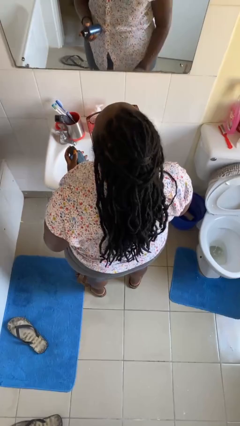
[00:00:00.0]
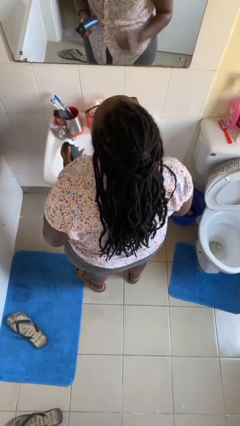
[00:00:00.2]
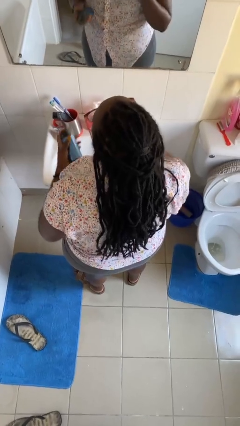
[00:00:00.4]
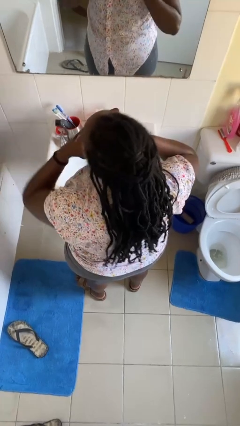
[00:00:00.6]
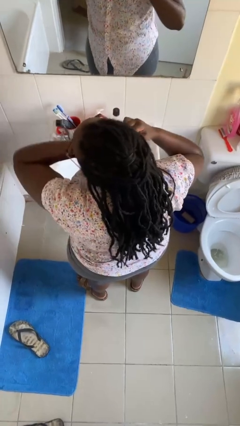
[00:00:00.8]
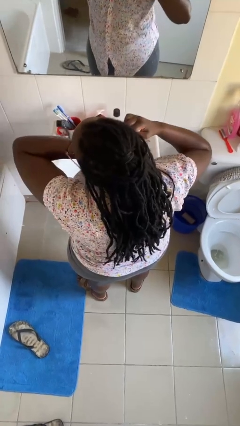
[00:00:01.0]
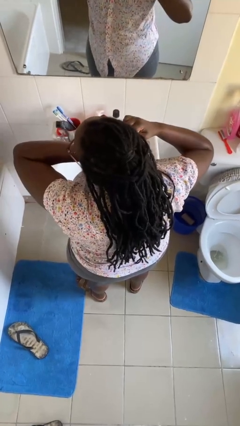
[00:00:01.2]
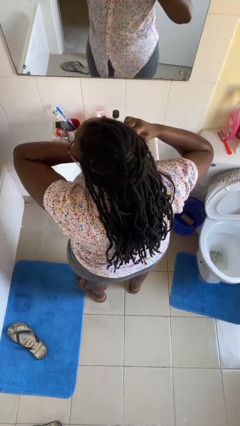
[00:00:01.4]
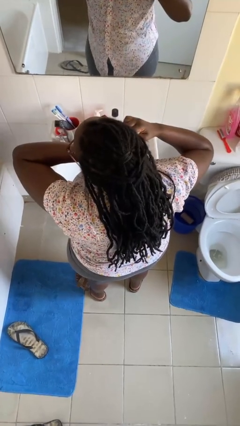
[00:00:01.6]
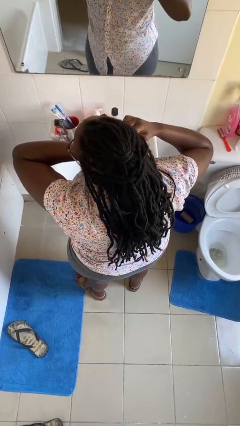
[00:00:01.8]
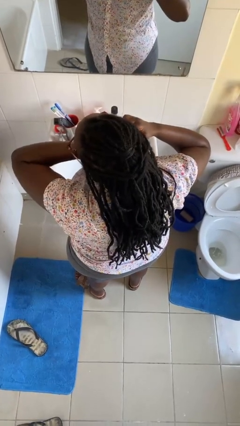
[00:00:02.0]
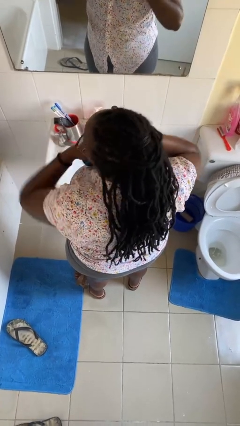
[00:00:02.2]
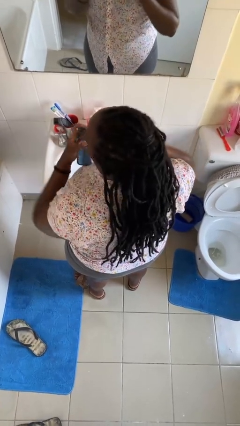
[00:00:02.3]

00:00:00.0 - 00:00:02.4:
person applies deodorant

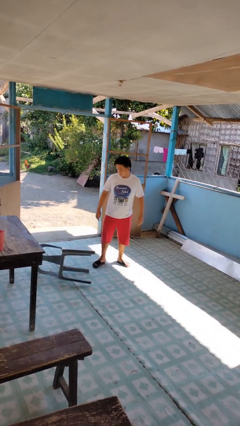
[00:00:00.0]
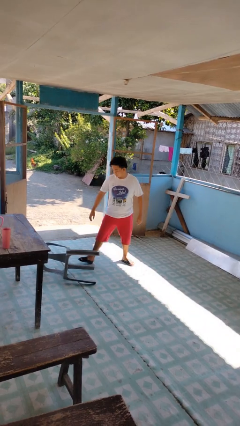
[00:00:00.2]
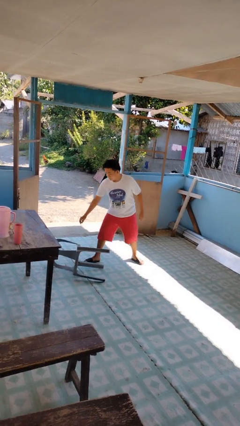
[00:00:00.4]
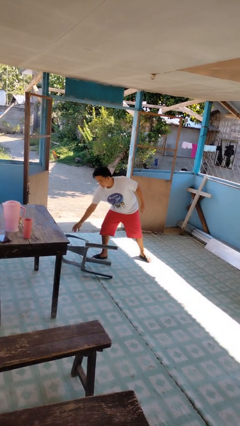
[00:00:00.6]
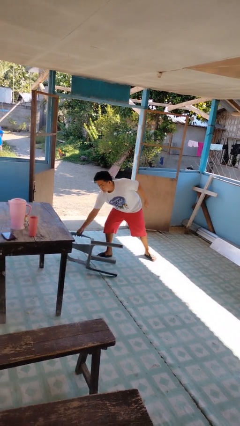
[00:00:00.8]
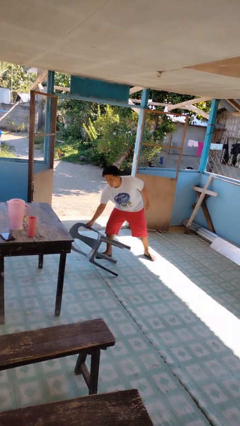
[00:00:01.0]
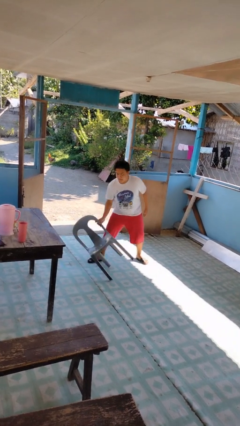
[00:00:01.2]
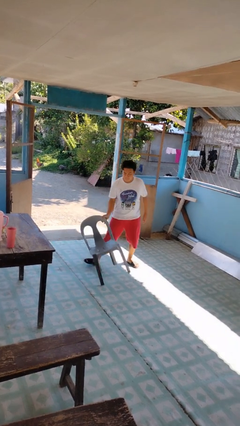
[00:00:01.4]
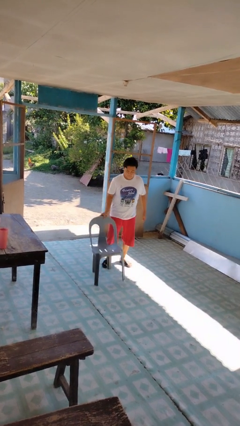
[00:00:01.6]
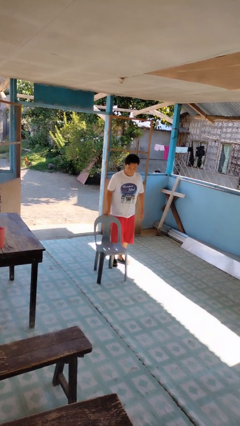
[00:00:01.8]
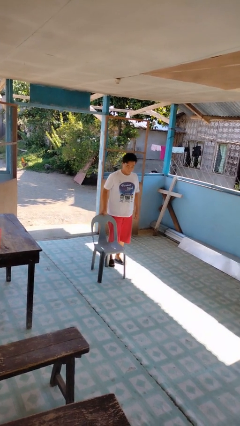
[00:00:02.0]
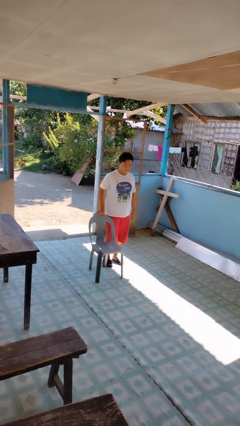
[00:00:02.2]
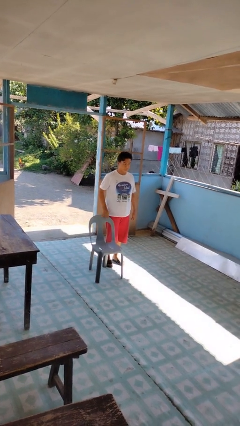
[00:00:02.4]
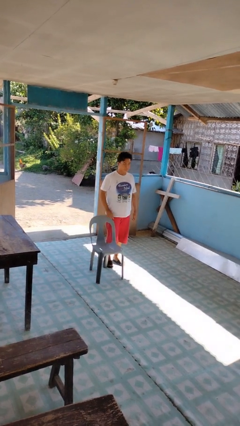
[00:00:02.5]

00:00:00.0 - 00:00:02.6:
person sets upright furniture

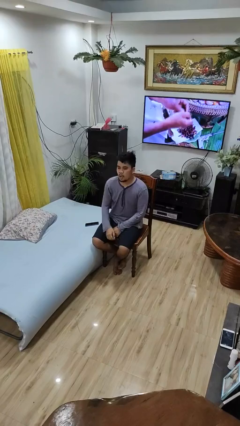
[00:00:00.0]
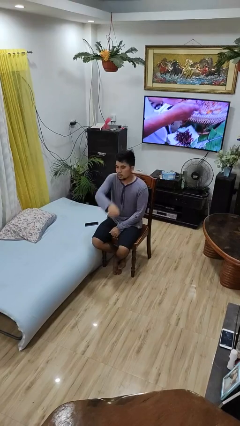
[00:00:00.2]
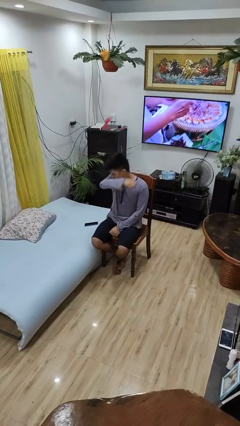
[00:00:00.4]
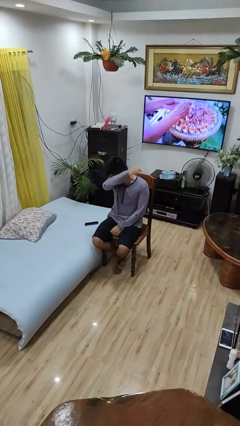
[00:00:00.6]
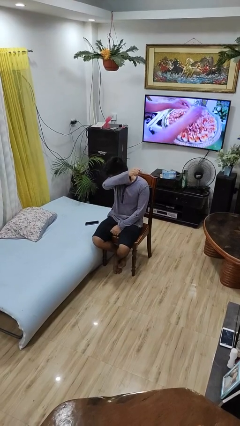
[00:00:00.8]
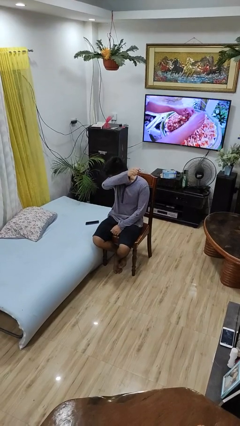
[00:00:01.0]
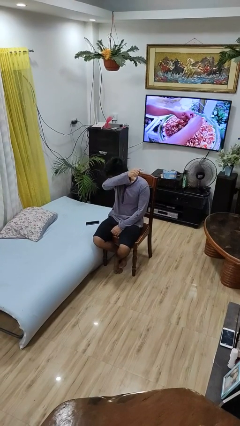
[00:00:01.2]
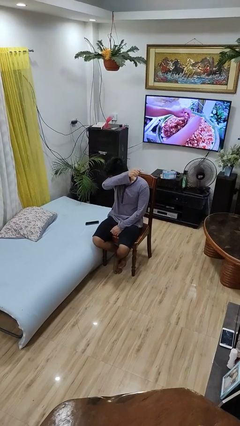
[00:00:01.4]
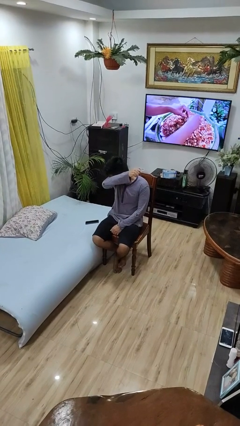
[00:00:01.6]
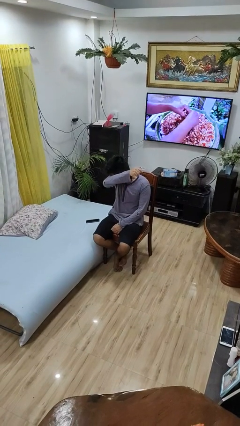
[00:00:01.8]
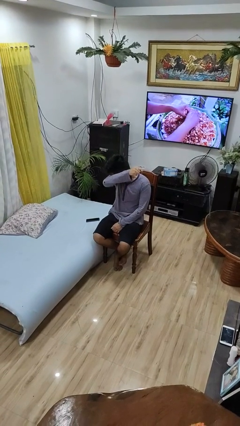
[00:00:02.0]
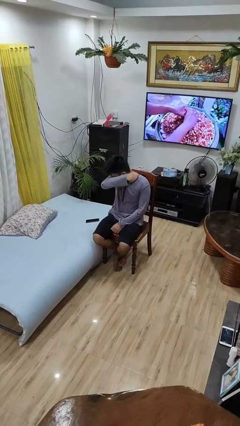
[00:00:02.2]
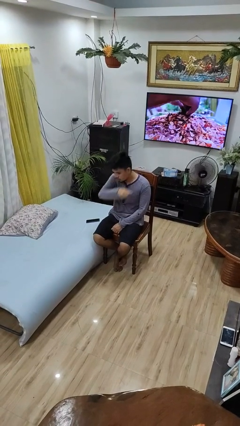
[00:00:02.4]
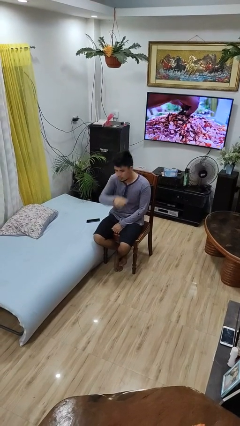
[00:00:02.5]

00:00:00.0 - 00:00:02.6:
person sneezes into arm

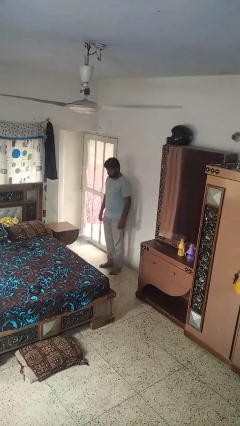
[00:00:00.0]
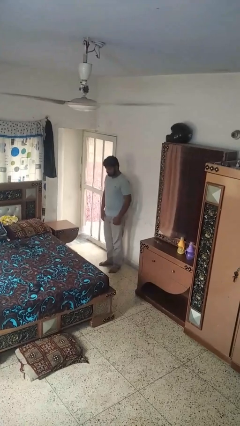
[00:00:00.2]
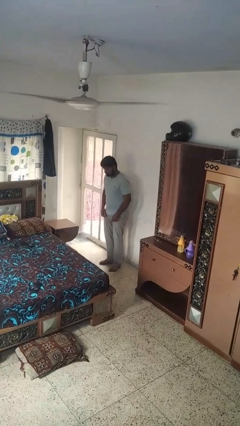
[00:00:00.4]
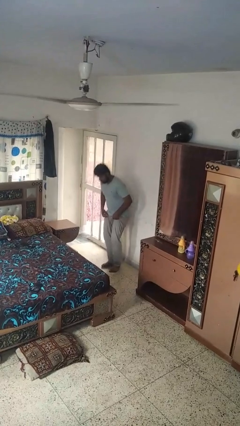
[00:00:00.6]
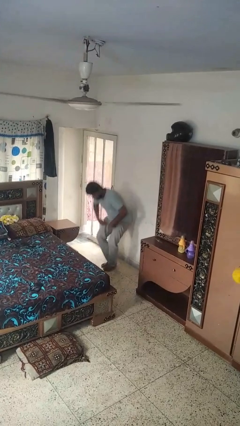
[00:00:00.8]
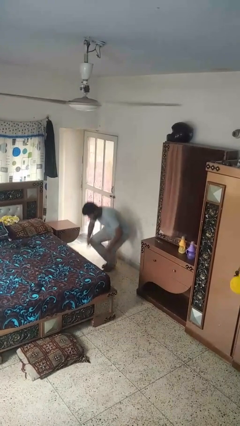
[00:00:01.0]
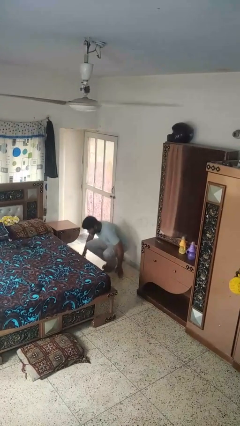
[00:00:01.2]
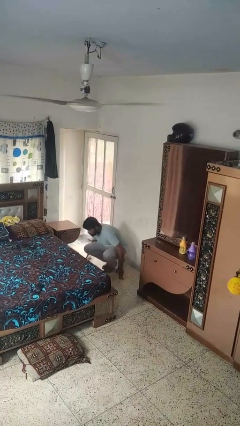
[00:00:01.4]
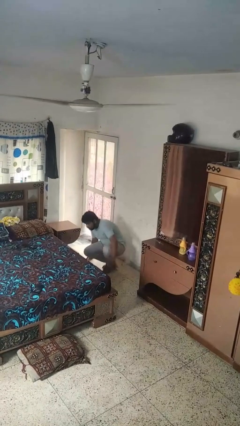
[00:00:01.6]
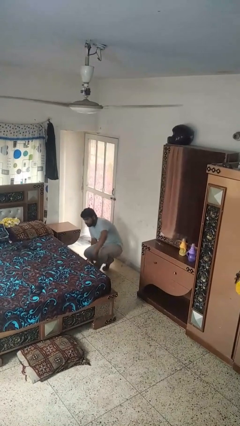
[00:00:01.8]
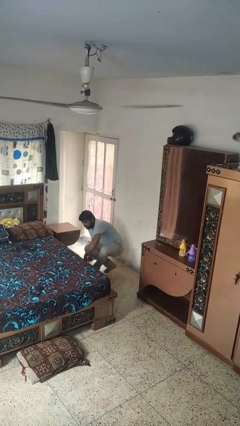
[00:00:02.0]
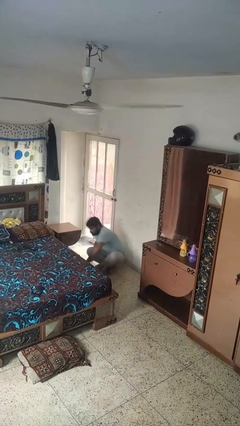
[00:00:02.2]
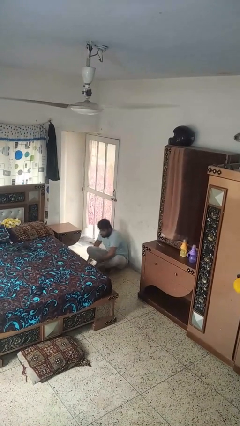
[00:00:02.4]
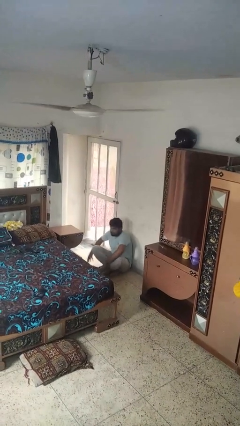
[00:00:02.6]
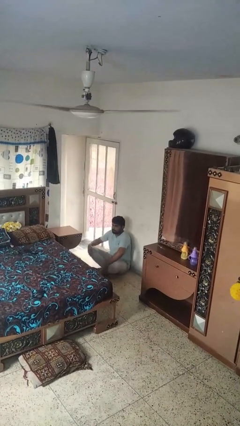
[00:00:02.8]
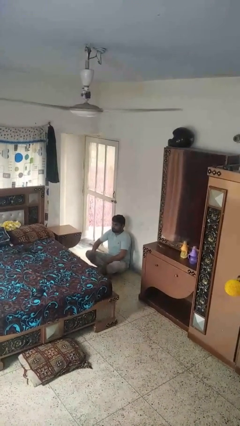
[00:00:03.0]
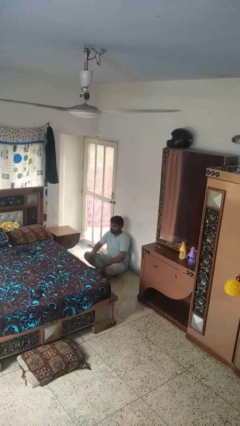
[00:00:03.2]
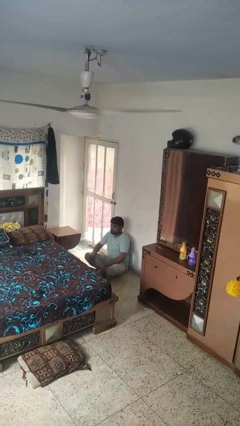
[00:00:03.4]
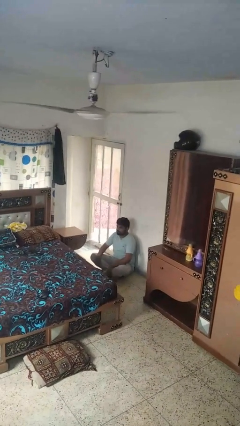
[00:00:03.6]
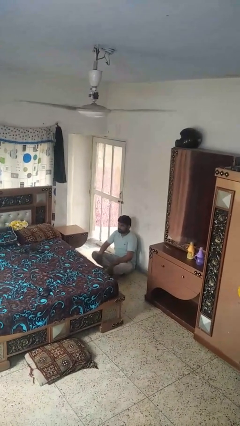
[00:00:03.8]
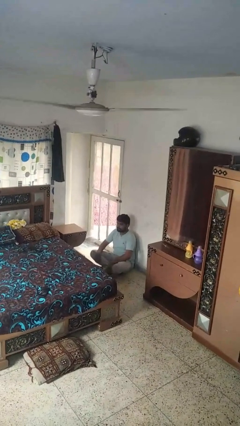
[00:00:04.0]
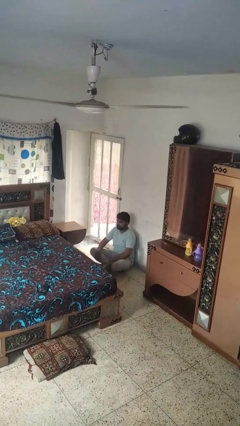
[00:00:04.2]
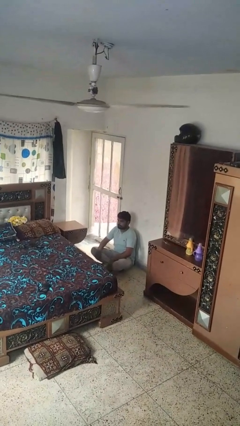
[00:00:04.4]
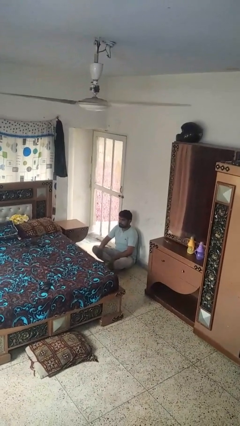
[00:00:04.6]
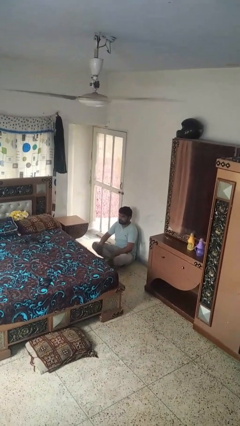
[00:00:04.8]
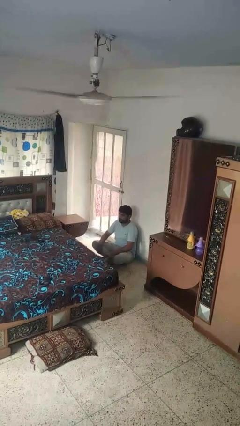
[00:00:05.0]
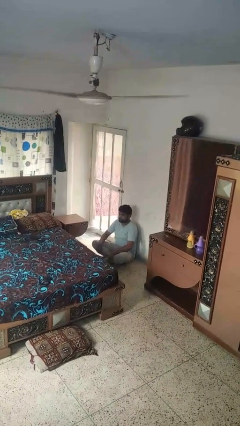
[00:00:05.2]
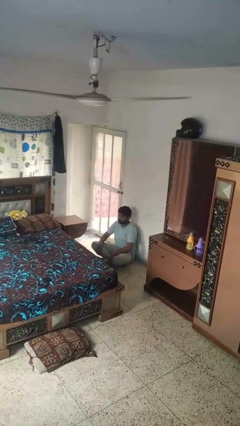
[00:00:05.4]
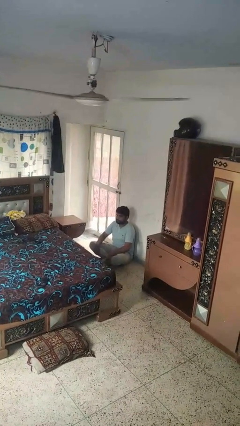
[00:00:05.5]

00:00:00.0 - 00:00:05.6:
person sits crisscross

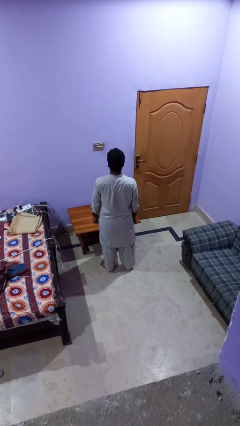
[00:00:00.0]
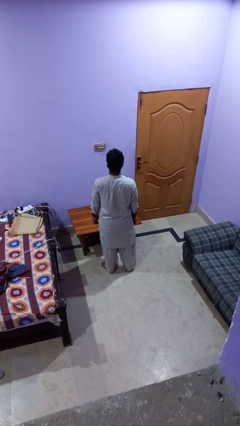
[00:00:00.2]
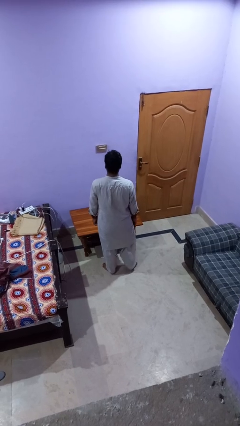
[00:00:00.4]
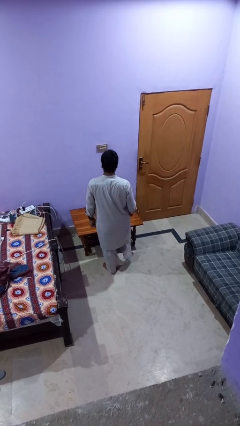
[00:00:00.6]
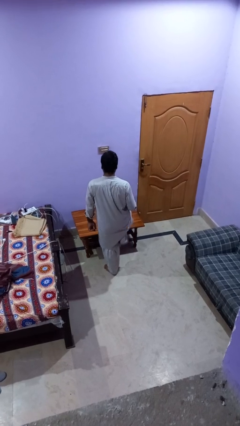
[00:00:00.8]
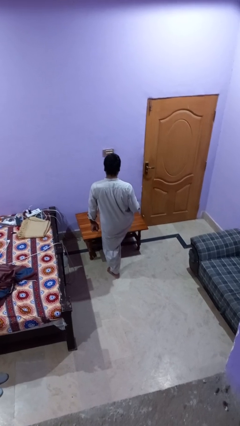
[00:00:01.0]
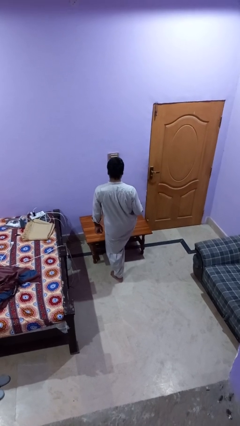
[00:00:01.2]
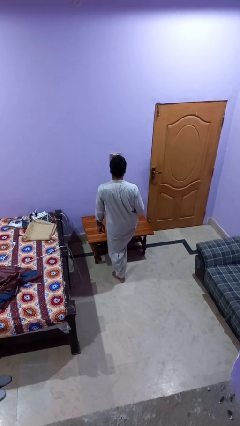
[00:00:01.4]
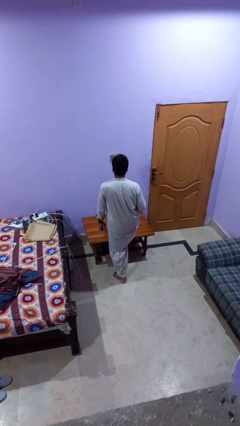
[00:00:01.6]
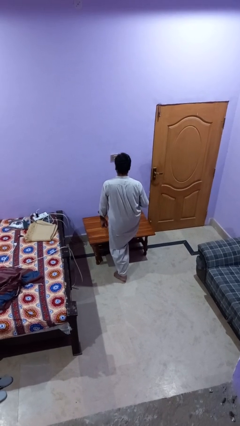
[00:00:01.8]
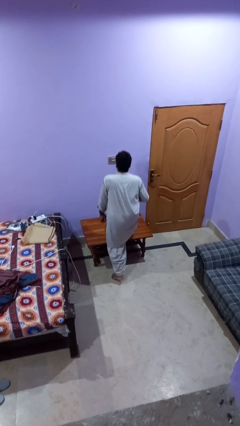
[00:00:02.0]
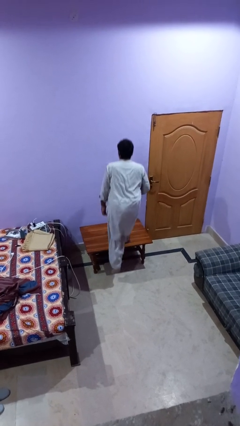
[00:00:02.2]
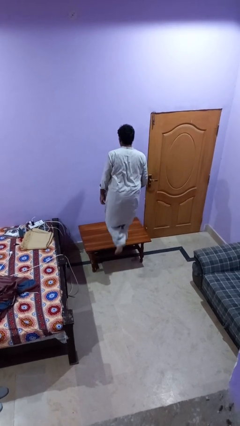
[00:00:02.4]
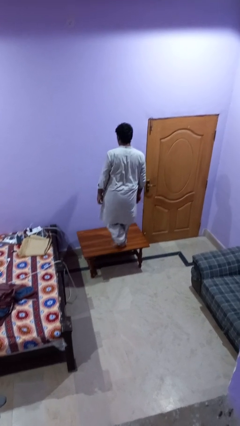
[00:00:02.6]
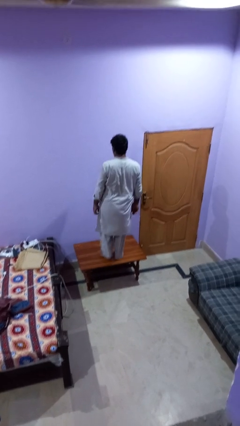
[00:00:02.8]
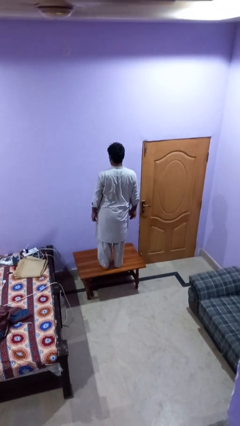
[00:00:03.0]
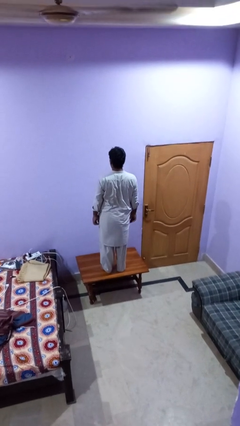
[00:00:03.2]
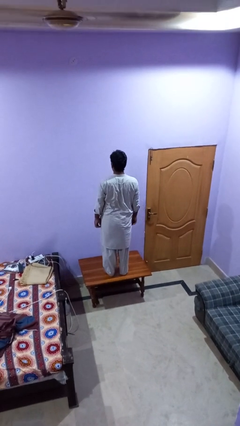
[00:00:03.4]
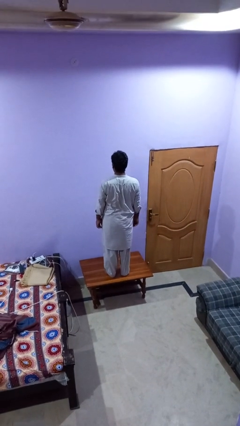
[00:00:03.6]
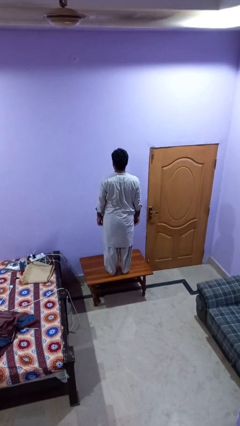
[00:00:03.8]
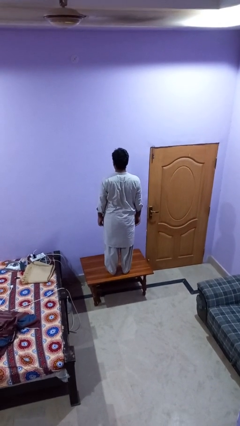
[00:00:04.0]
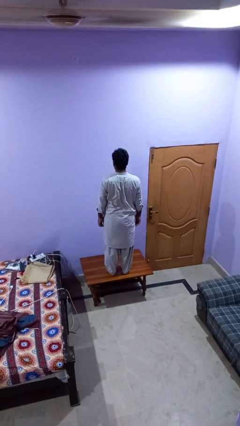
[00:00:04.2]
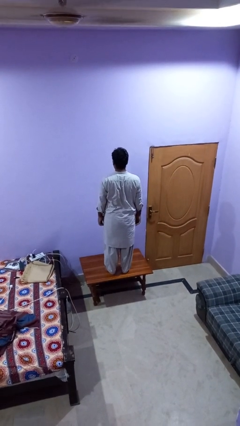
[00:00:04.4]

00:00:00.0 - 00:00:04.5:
person climbs on table
